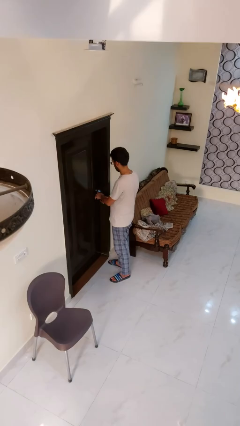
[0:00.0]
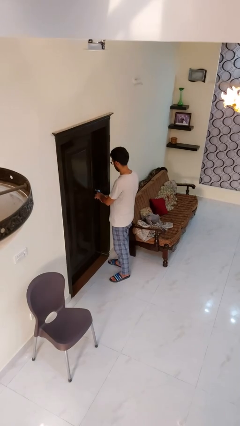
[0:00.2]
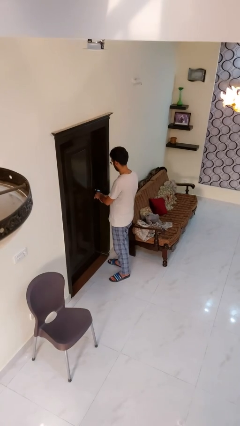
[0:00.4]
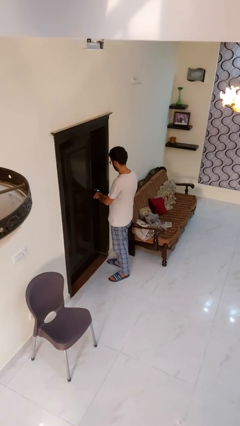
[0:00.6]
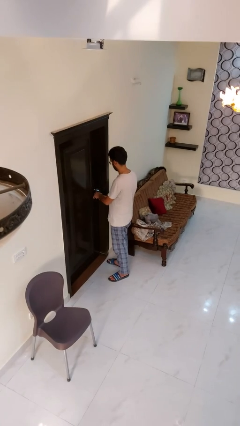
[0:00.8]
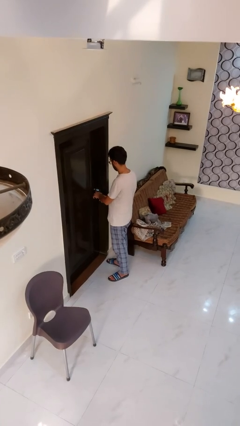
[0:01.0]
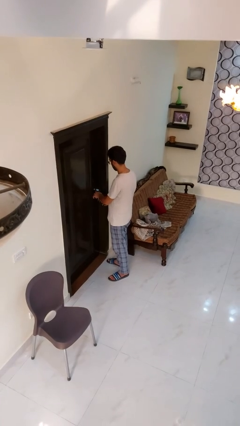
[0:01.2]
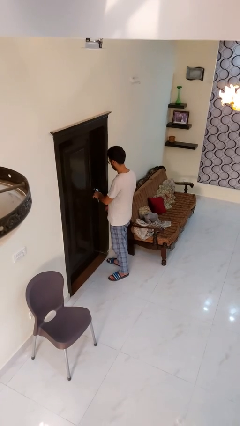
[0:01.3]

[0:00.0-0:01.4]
person locks door with keys

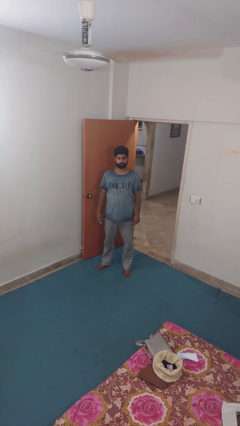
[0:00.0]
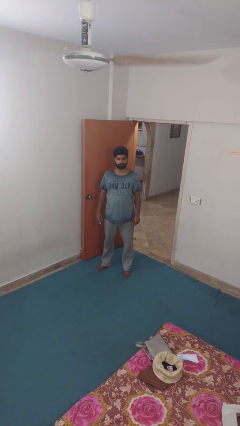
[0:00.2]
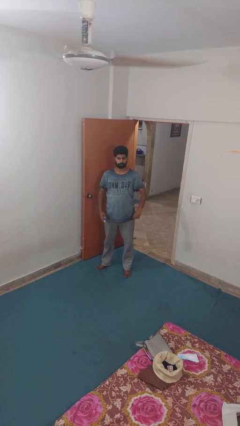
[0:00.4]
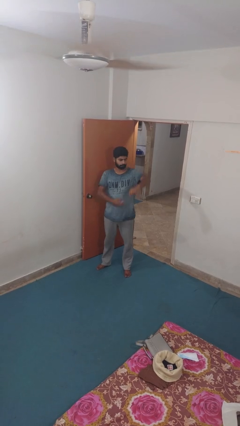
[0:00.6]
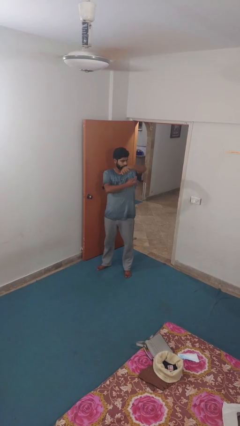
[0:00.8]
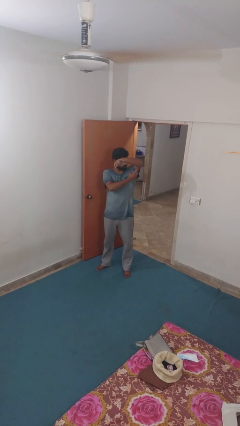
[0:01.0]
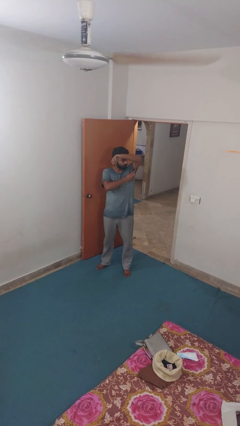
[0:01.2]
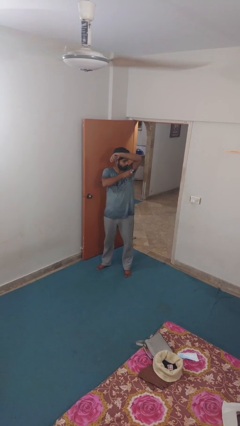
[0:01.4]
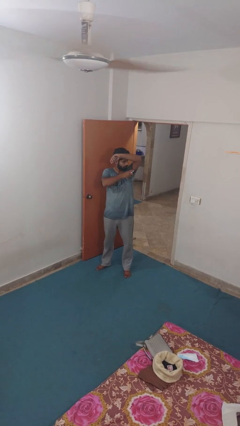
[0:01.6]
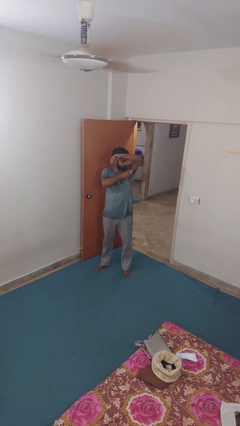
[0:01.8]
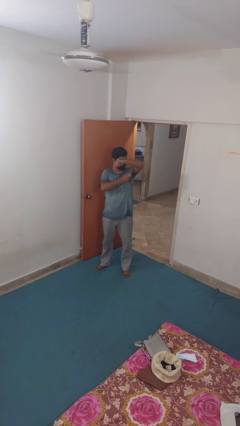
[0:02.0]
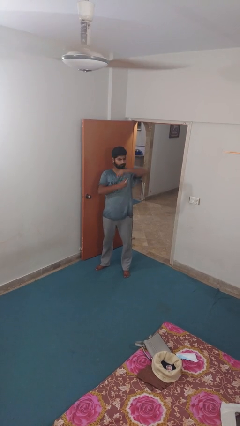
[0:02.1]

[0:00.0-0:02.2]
person applies deodorant

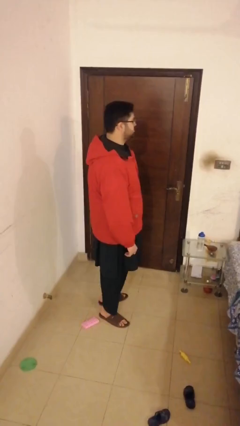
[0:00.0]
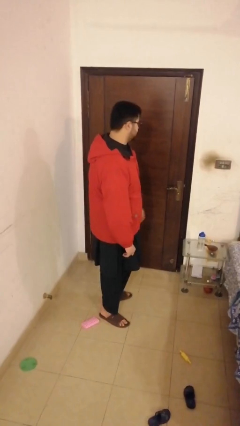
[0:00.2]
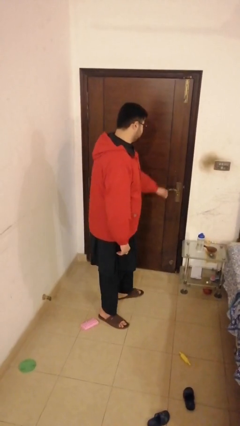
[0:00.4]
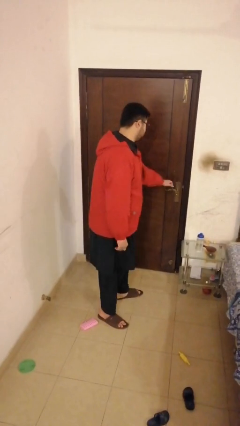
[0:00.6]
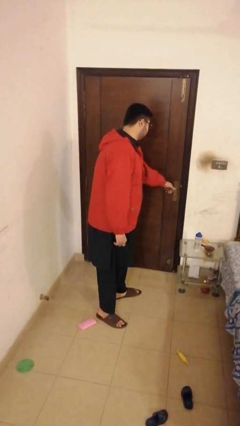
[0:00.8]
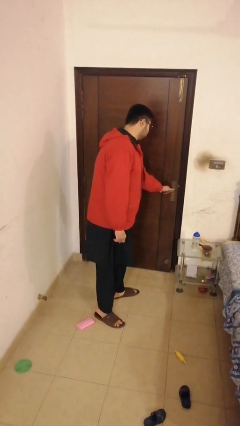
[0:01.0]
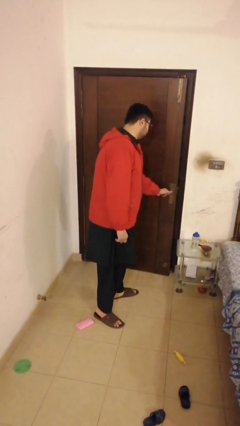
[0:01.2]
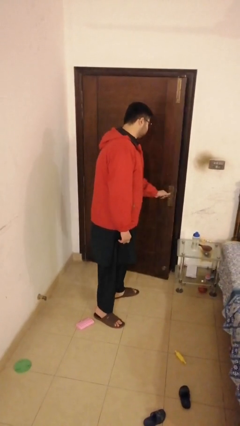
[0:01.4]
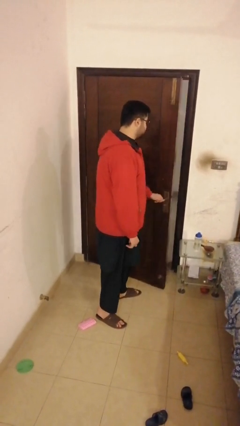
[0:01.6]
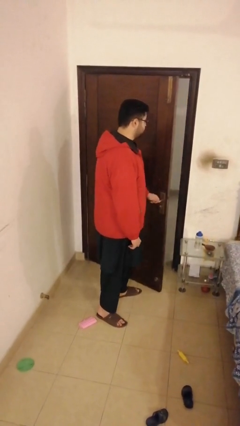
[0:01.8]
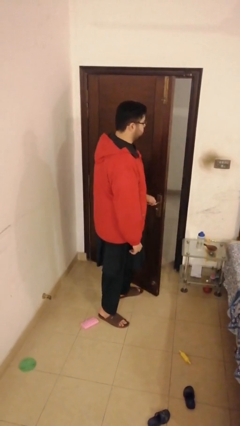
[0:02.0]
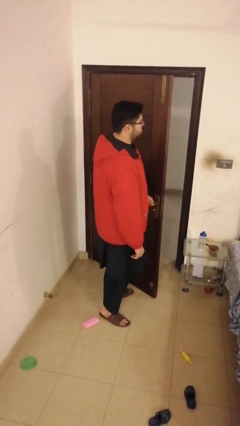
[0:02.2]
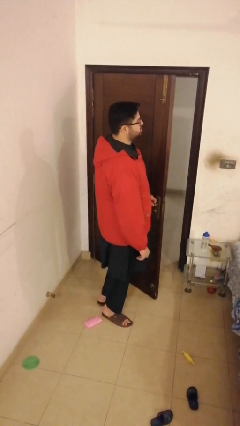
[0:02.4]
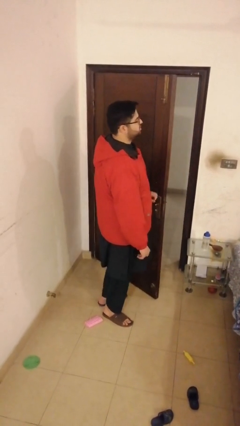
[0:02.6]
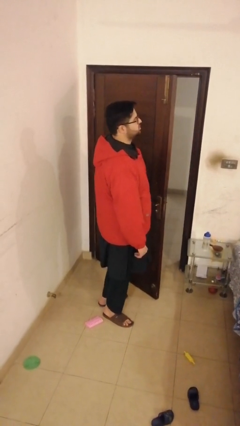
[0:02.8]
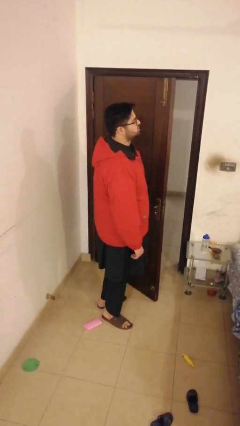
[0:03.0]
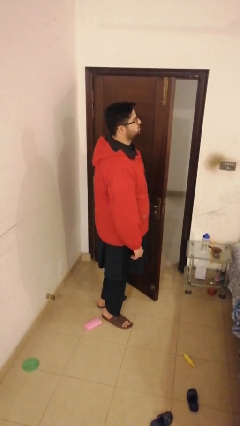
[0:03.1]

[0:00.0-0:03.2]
person opens facility door

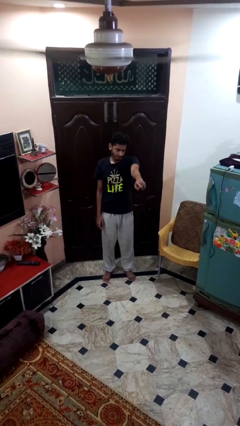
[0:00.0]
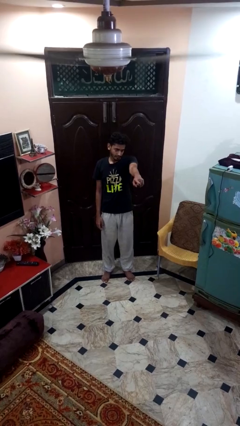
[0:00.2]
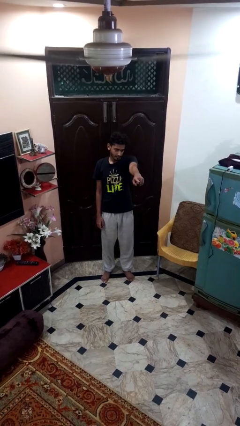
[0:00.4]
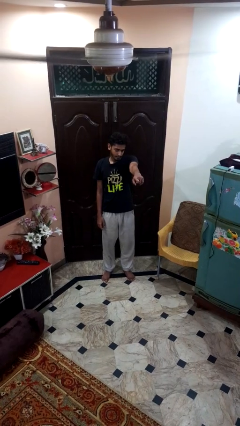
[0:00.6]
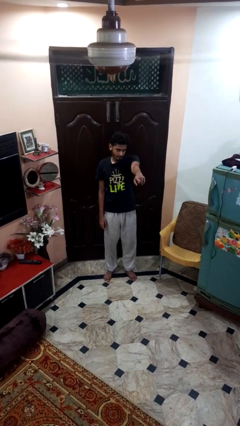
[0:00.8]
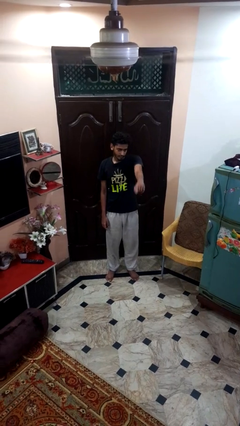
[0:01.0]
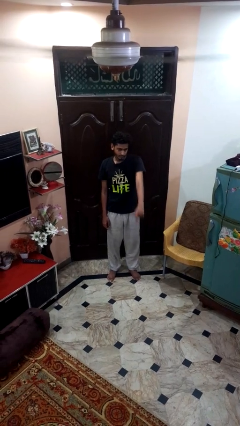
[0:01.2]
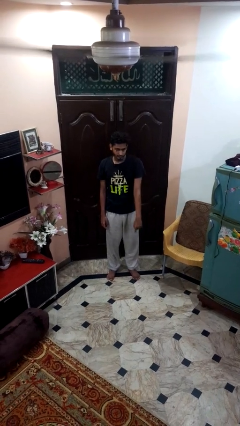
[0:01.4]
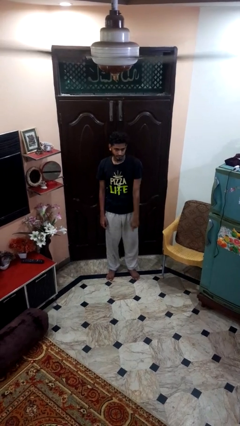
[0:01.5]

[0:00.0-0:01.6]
person points at person

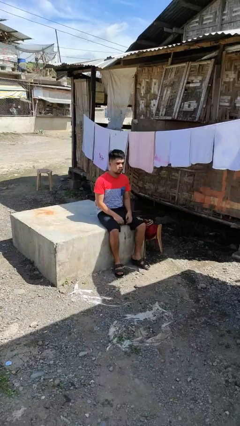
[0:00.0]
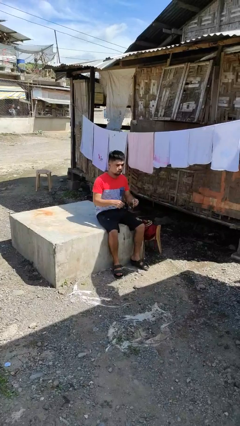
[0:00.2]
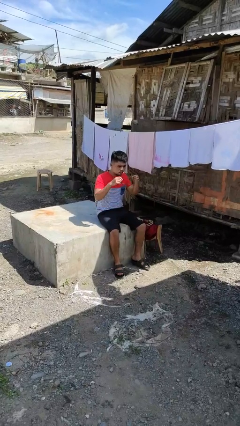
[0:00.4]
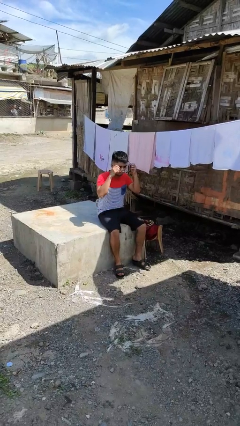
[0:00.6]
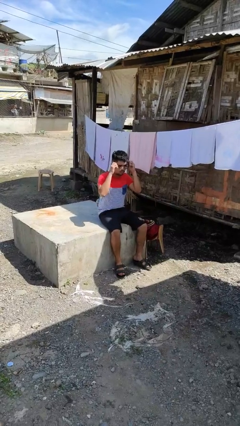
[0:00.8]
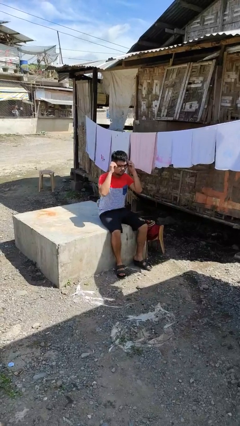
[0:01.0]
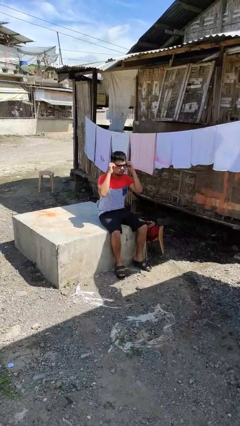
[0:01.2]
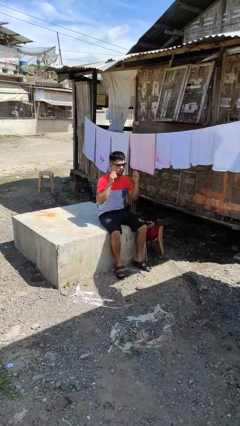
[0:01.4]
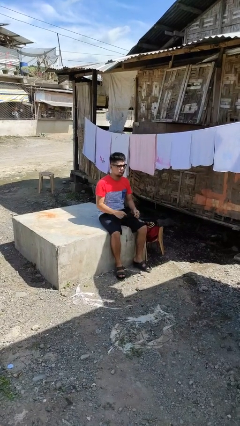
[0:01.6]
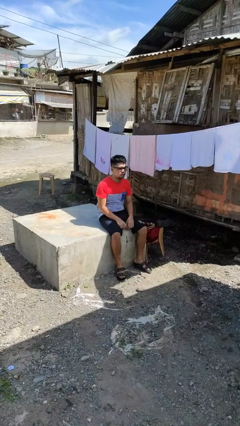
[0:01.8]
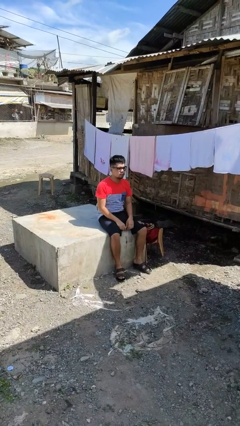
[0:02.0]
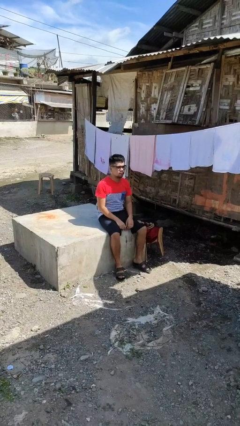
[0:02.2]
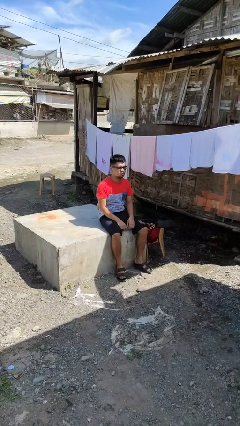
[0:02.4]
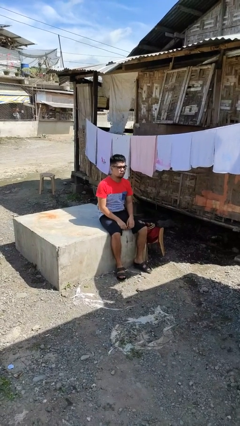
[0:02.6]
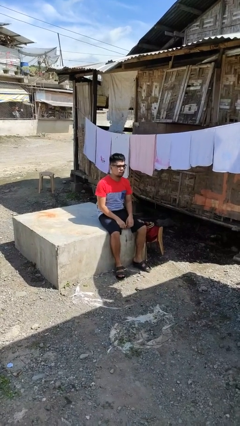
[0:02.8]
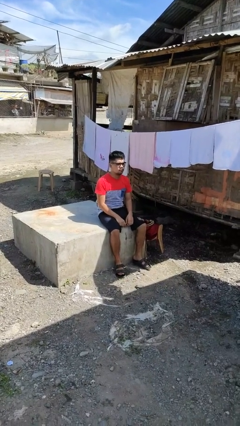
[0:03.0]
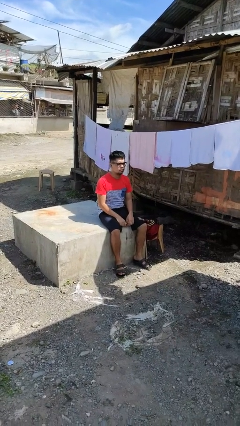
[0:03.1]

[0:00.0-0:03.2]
person puts on glasses

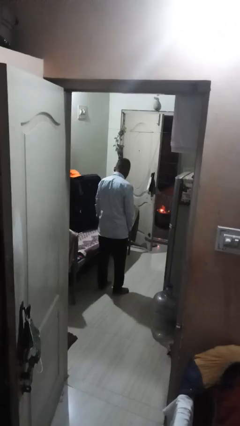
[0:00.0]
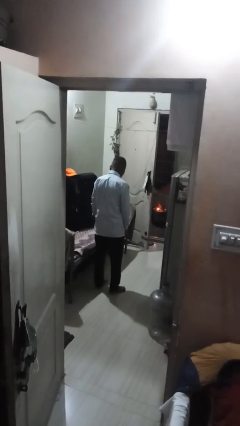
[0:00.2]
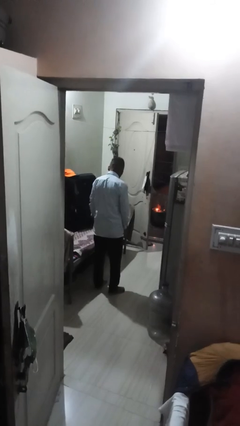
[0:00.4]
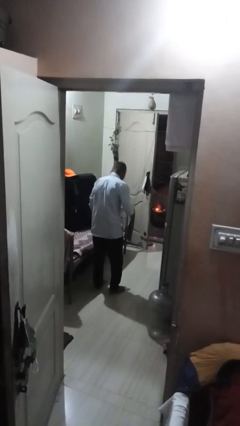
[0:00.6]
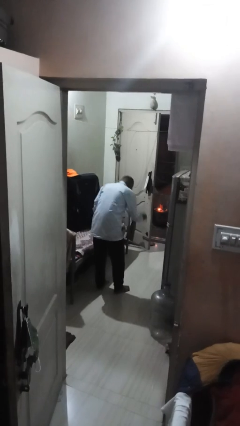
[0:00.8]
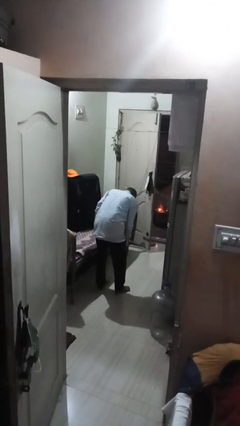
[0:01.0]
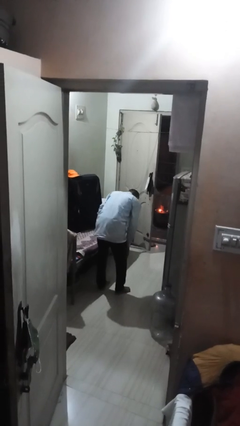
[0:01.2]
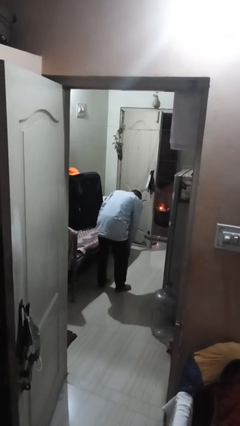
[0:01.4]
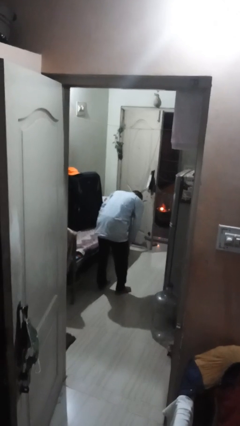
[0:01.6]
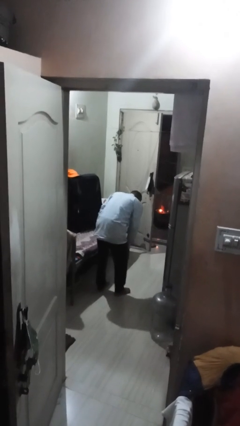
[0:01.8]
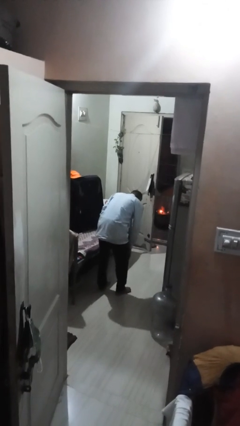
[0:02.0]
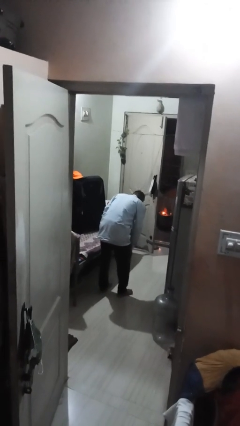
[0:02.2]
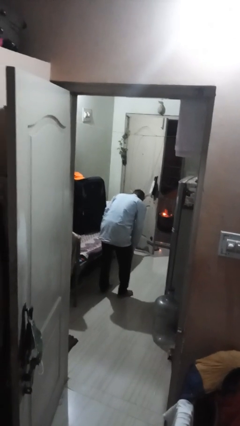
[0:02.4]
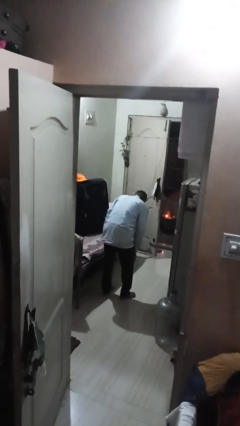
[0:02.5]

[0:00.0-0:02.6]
person swats bug

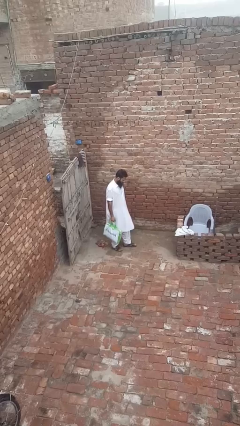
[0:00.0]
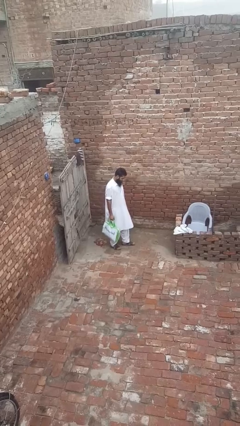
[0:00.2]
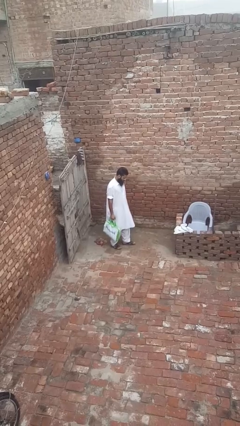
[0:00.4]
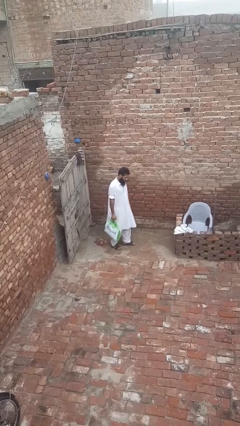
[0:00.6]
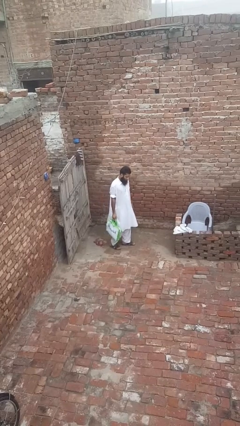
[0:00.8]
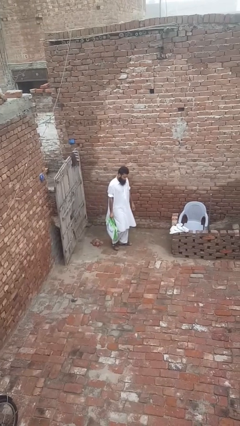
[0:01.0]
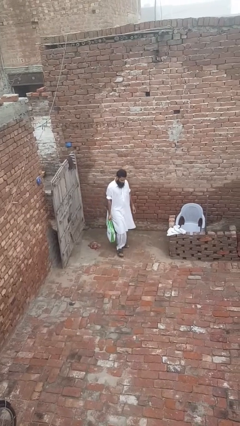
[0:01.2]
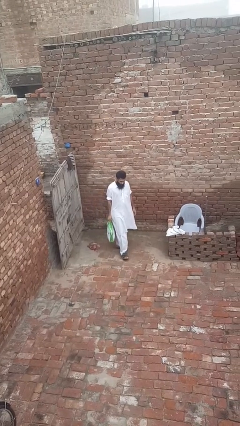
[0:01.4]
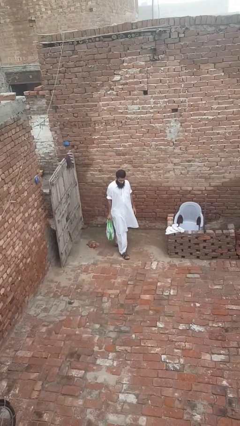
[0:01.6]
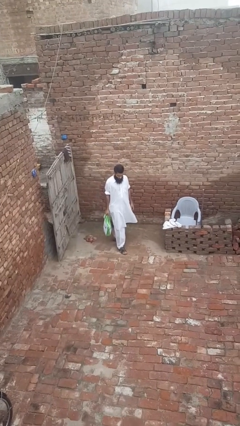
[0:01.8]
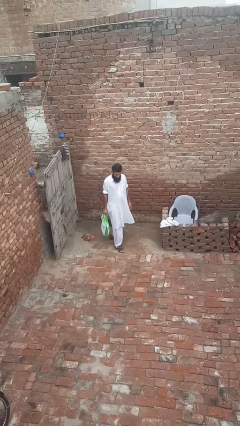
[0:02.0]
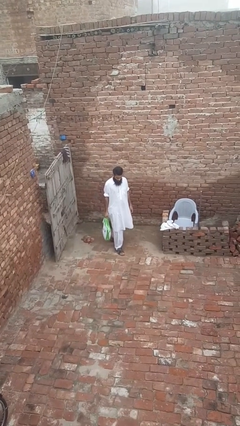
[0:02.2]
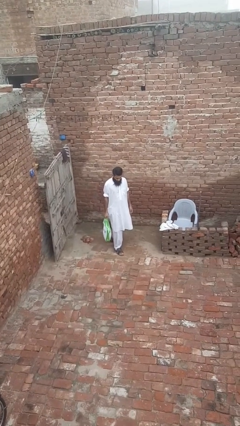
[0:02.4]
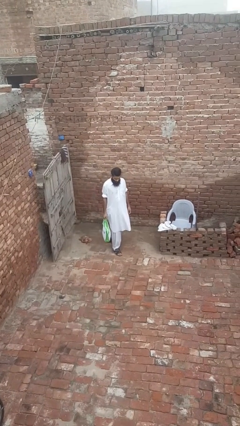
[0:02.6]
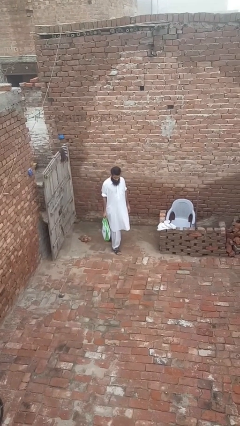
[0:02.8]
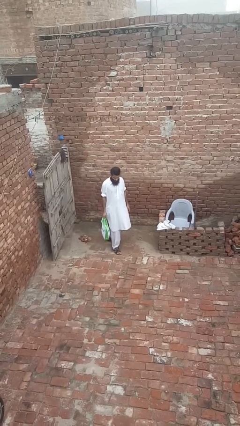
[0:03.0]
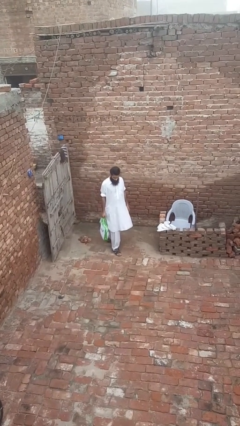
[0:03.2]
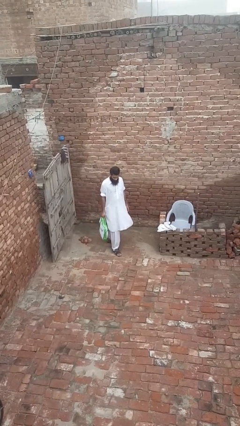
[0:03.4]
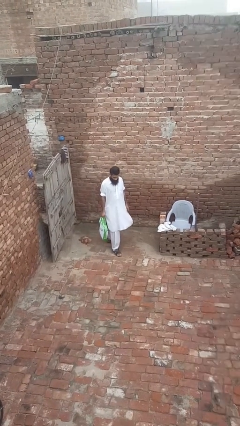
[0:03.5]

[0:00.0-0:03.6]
person carries groceries
